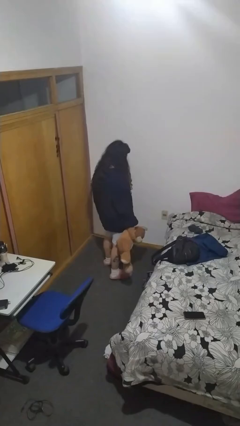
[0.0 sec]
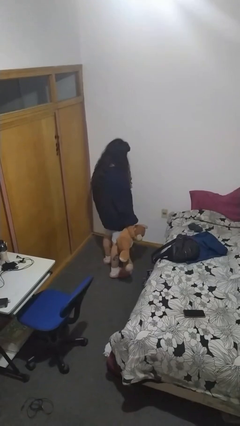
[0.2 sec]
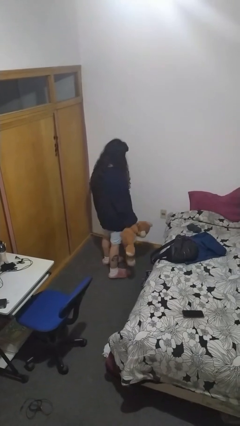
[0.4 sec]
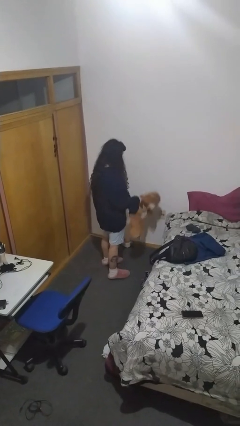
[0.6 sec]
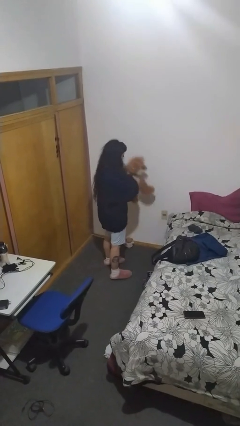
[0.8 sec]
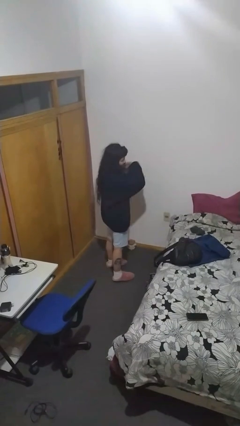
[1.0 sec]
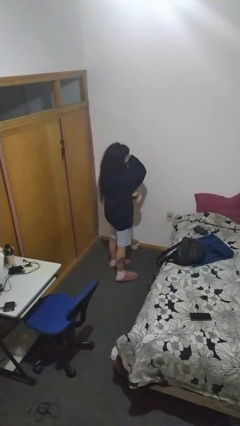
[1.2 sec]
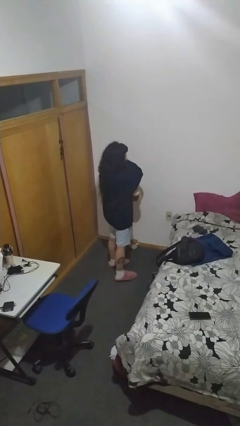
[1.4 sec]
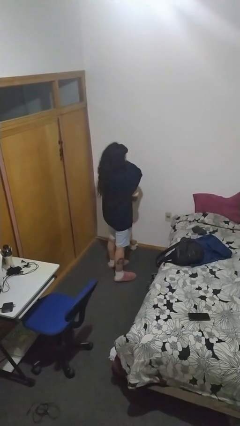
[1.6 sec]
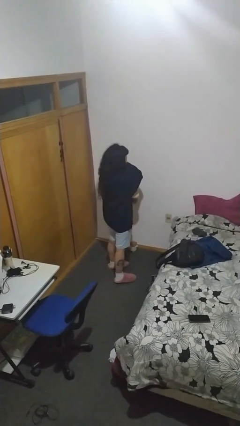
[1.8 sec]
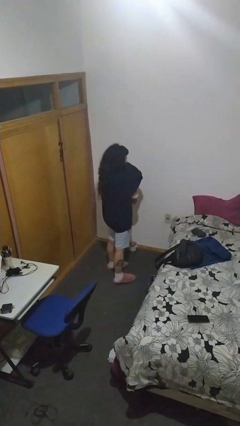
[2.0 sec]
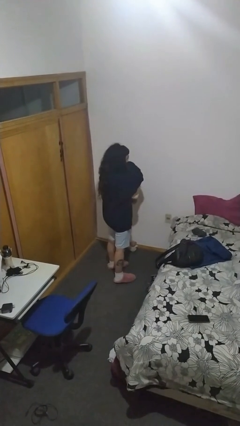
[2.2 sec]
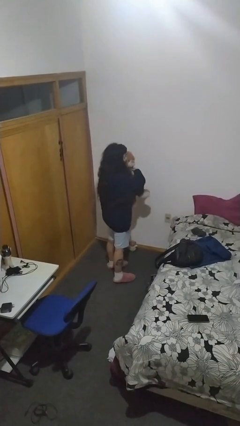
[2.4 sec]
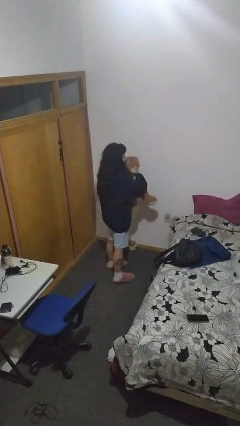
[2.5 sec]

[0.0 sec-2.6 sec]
person hugs stuffed animal

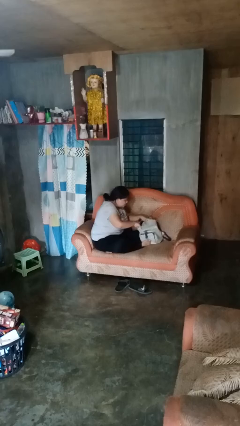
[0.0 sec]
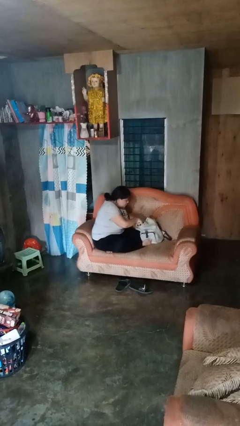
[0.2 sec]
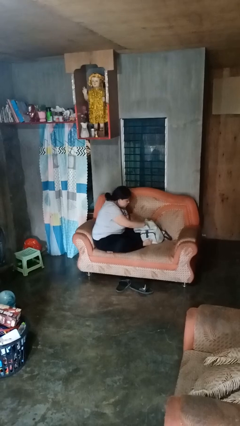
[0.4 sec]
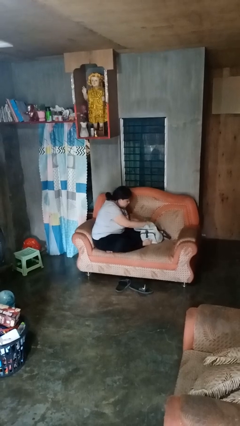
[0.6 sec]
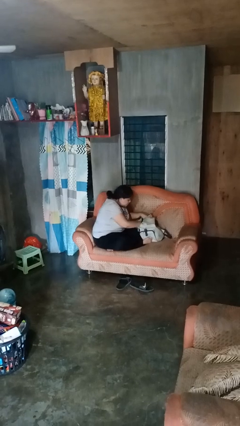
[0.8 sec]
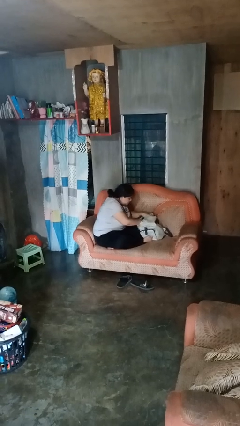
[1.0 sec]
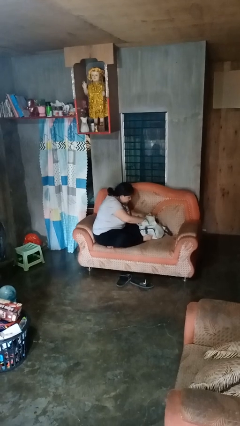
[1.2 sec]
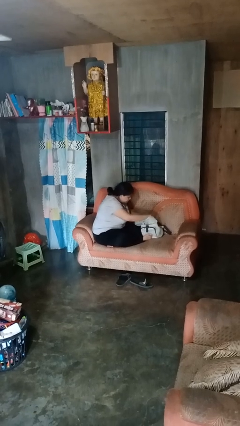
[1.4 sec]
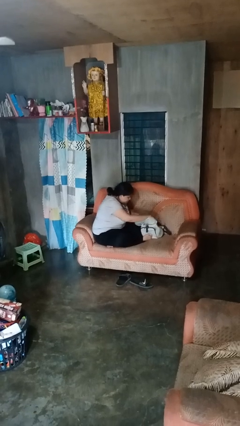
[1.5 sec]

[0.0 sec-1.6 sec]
person searches in backpack

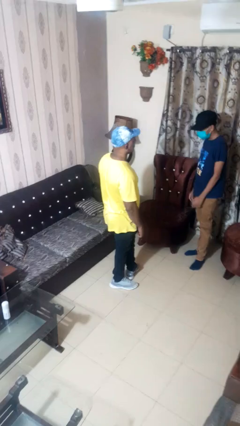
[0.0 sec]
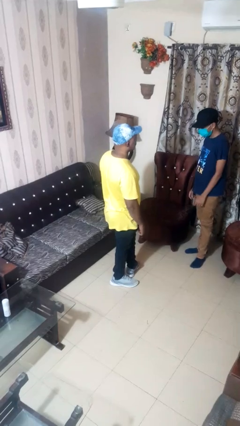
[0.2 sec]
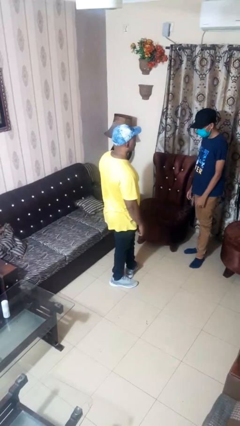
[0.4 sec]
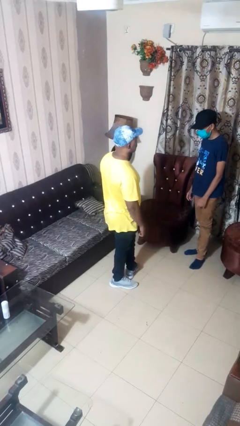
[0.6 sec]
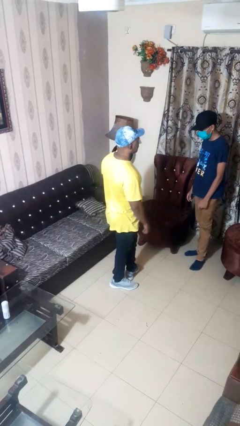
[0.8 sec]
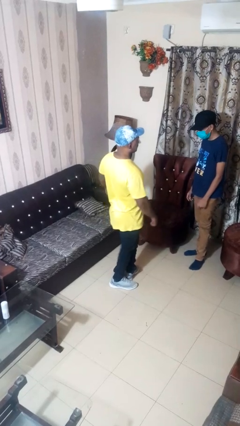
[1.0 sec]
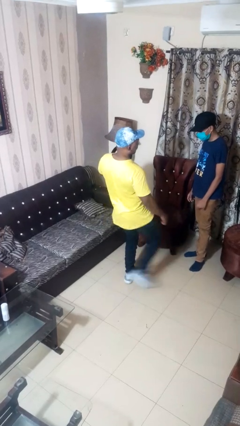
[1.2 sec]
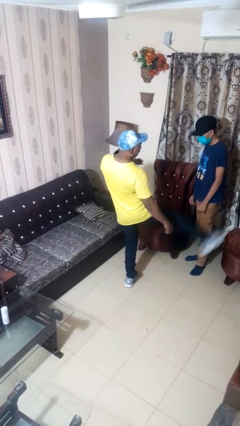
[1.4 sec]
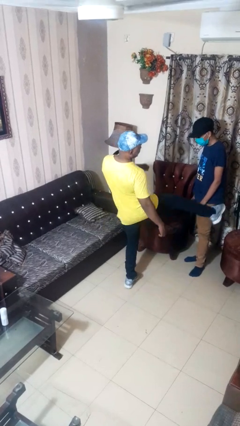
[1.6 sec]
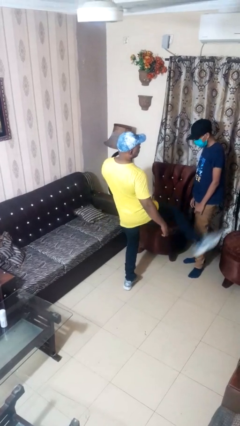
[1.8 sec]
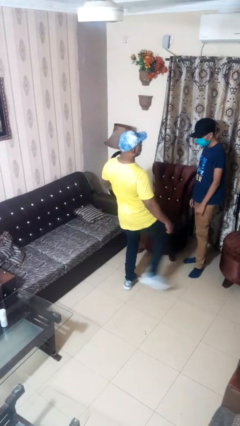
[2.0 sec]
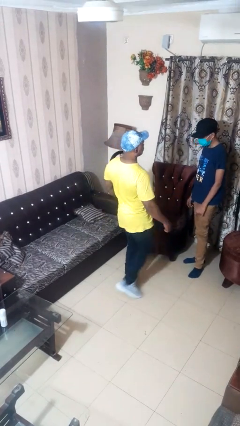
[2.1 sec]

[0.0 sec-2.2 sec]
person kicks object to person

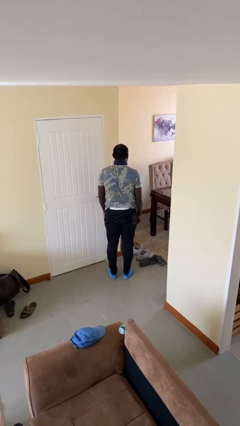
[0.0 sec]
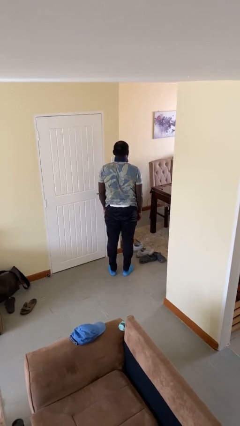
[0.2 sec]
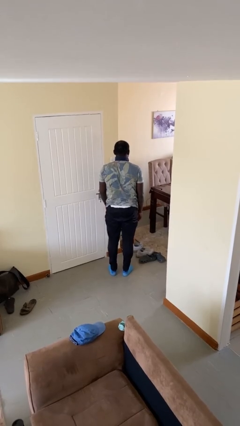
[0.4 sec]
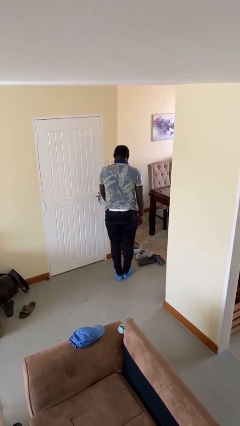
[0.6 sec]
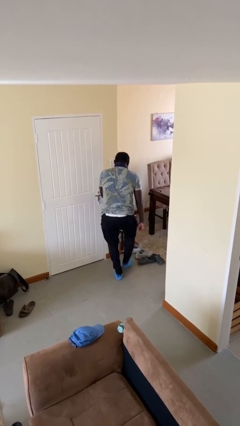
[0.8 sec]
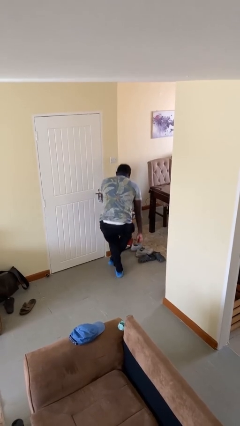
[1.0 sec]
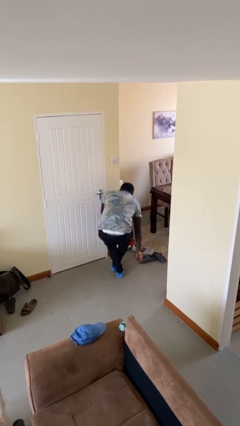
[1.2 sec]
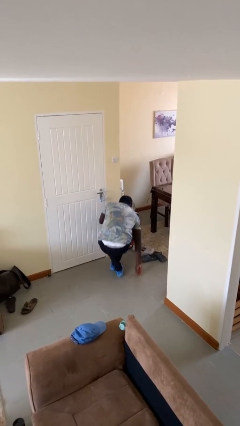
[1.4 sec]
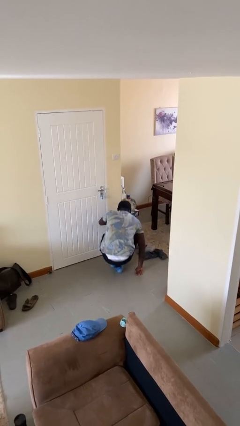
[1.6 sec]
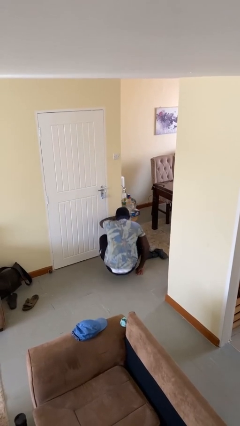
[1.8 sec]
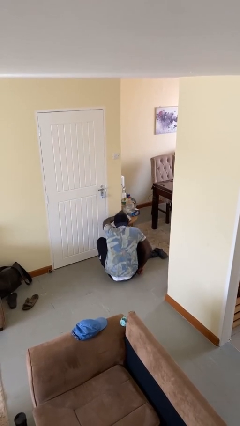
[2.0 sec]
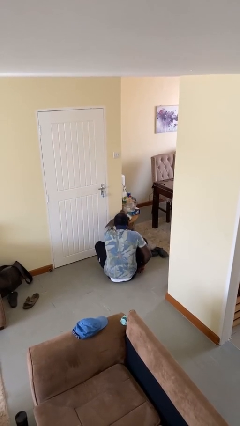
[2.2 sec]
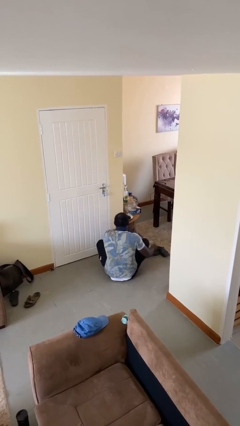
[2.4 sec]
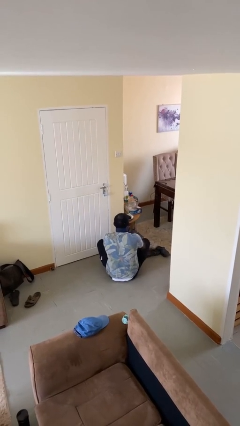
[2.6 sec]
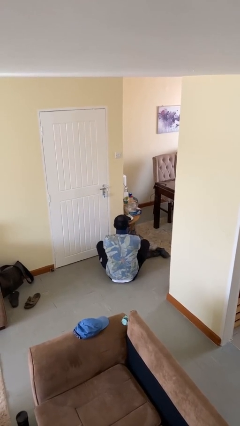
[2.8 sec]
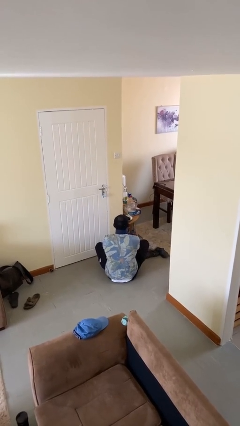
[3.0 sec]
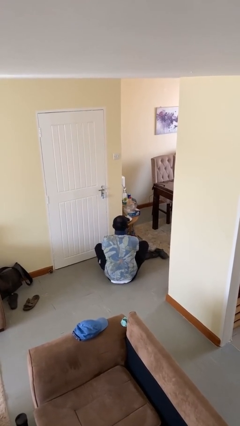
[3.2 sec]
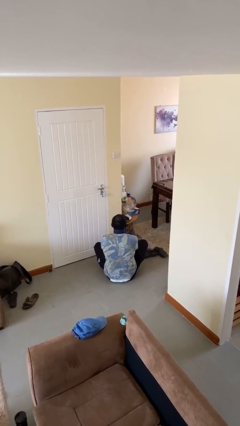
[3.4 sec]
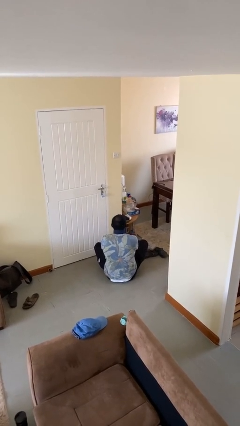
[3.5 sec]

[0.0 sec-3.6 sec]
person sits crisscross

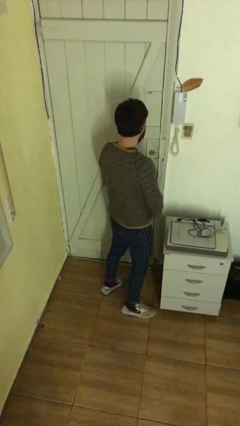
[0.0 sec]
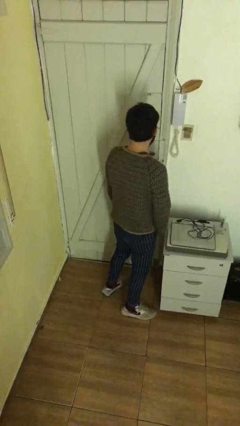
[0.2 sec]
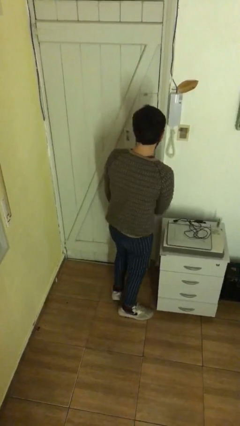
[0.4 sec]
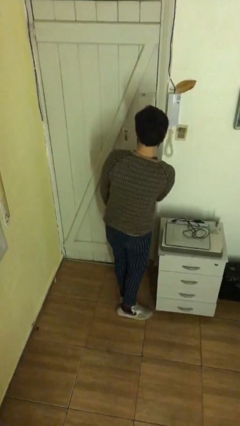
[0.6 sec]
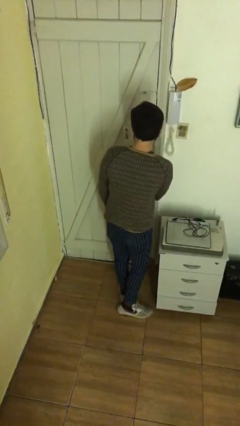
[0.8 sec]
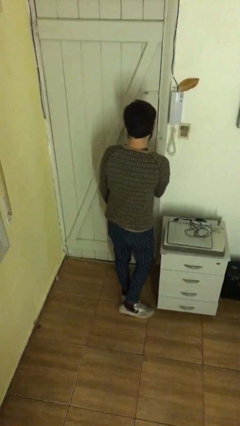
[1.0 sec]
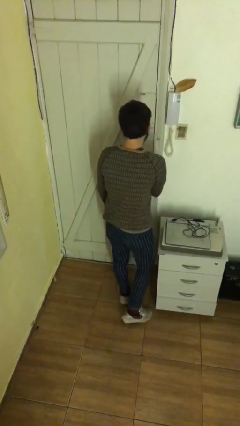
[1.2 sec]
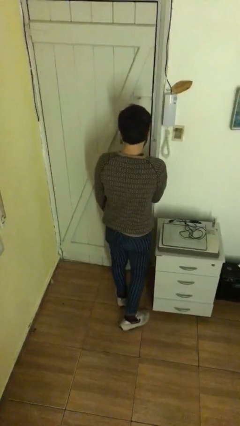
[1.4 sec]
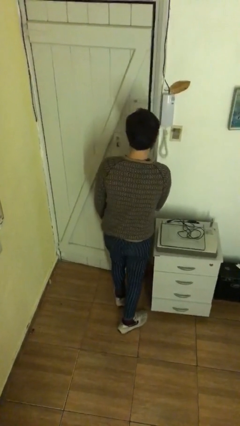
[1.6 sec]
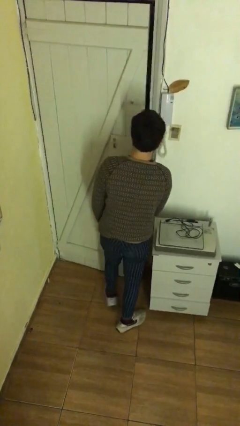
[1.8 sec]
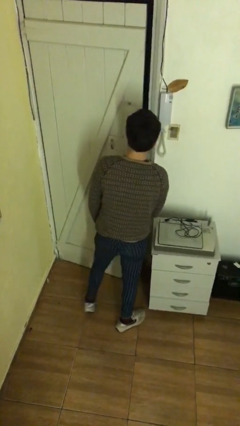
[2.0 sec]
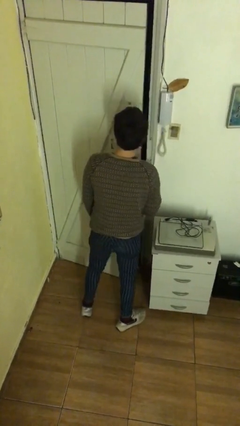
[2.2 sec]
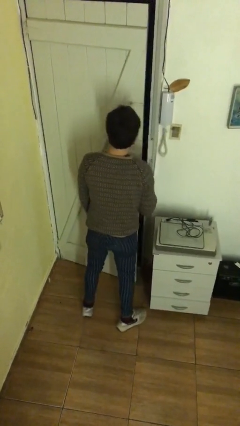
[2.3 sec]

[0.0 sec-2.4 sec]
person opens facility door

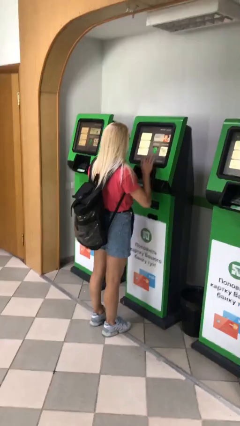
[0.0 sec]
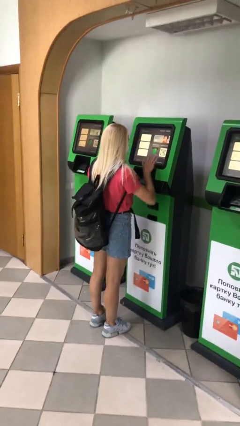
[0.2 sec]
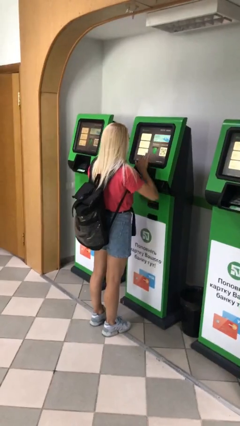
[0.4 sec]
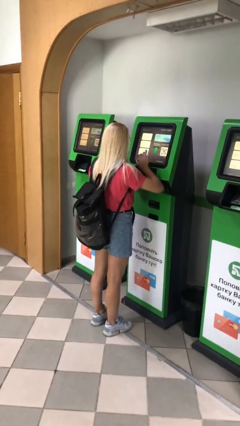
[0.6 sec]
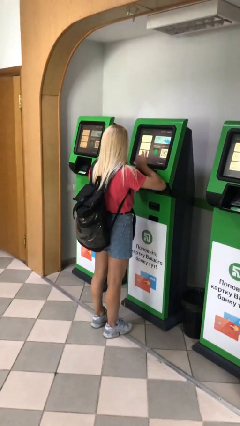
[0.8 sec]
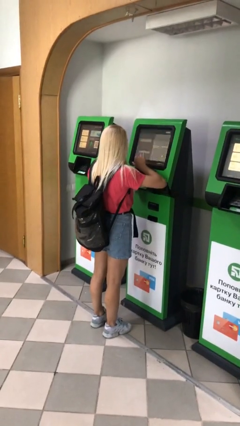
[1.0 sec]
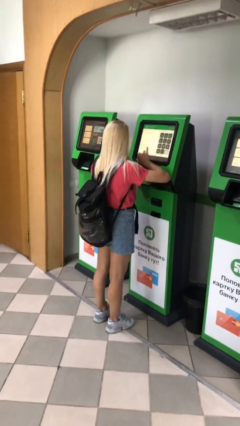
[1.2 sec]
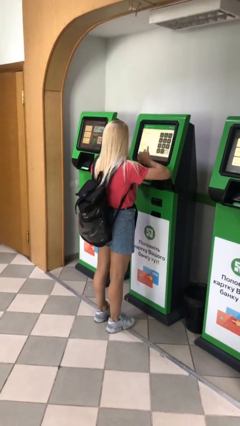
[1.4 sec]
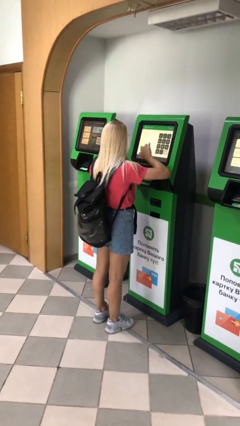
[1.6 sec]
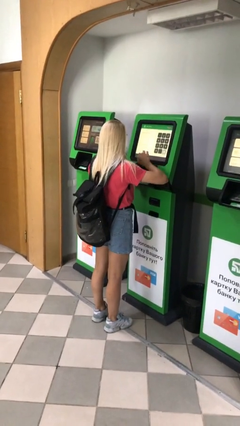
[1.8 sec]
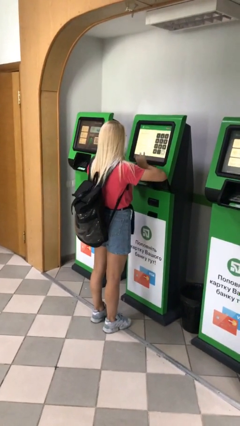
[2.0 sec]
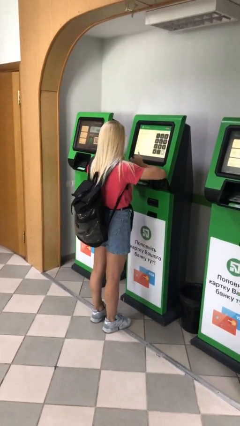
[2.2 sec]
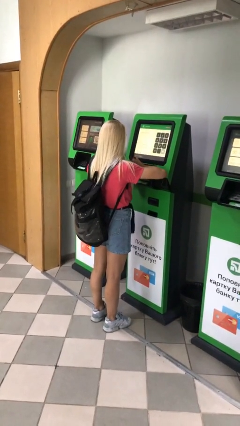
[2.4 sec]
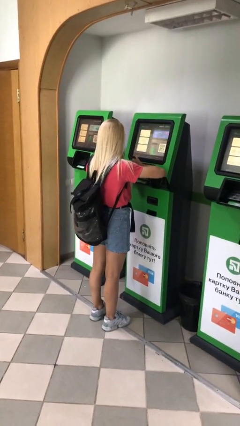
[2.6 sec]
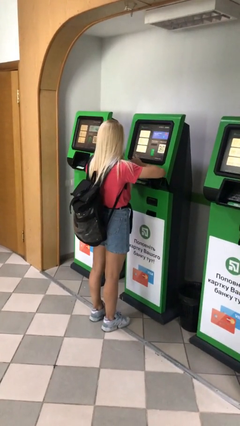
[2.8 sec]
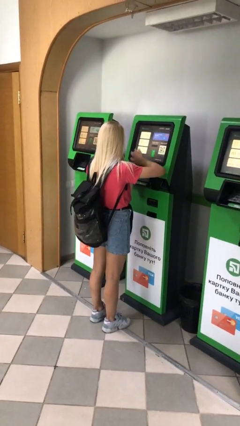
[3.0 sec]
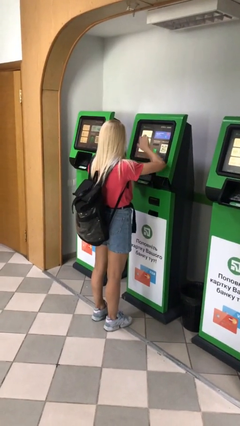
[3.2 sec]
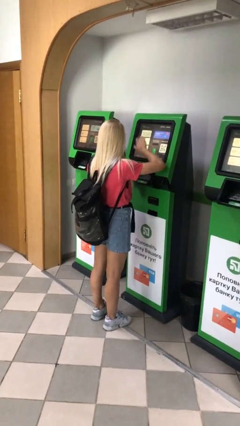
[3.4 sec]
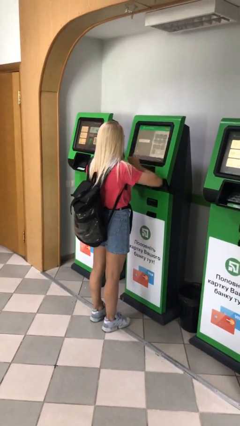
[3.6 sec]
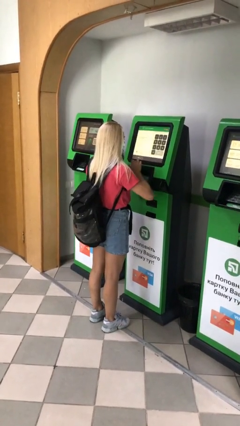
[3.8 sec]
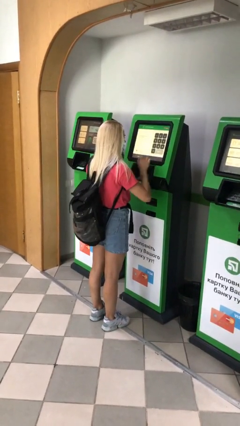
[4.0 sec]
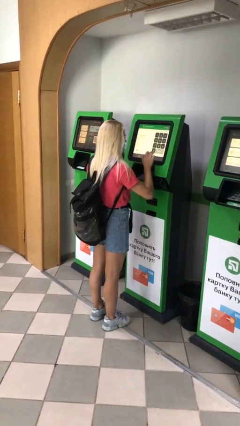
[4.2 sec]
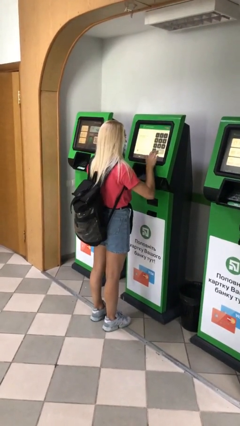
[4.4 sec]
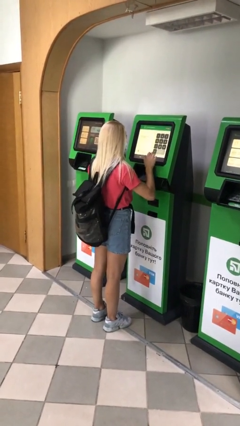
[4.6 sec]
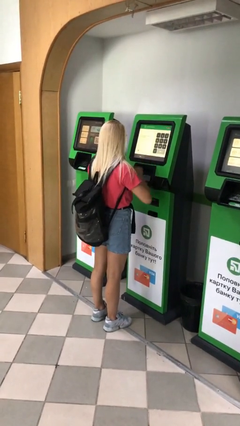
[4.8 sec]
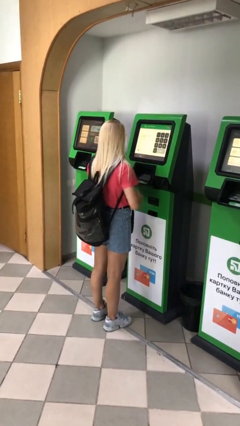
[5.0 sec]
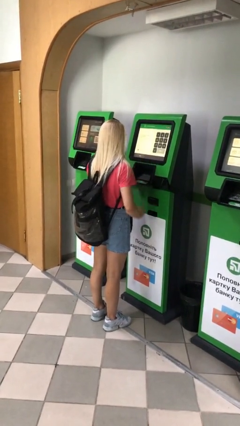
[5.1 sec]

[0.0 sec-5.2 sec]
person purchases from machine
